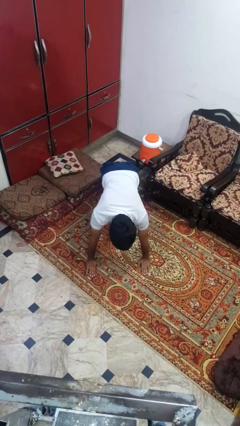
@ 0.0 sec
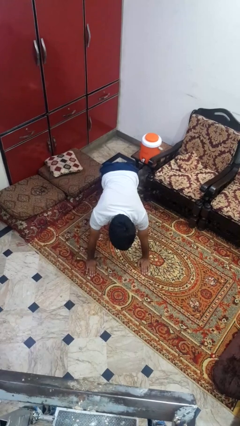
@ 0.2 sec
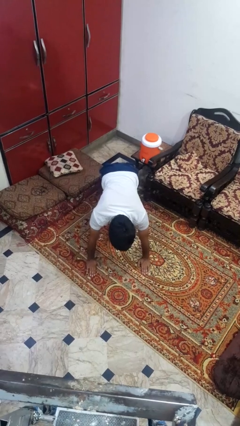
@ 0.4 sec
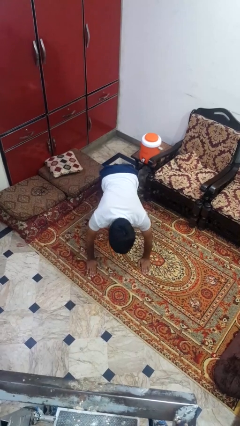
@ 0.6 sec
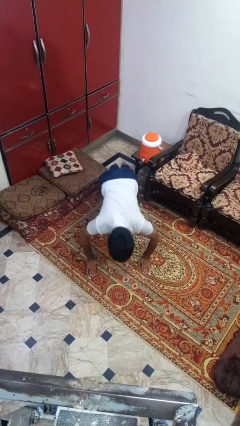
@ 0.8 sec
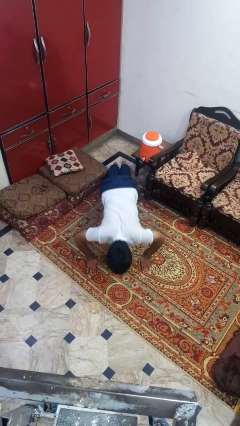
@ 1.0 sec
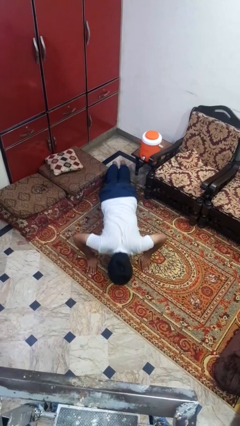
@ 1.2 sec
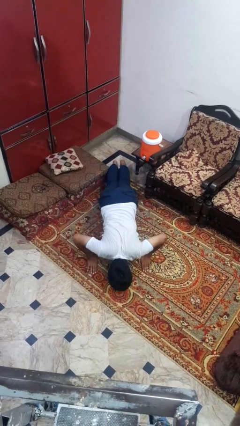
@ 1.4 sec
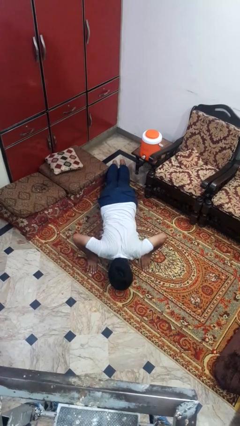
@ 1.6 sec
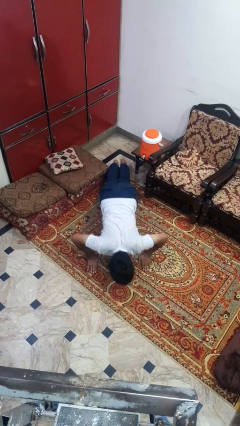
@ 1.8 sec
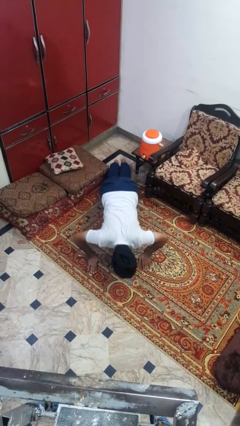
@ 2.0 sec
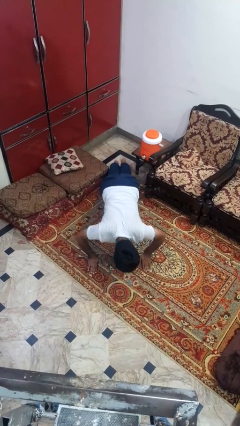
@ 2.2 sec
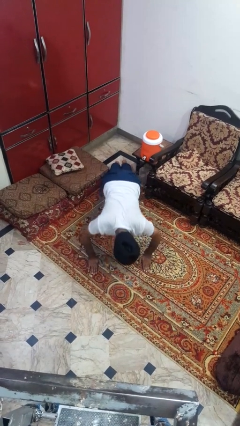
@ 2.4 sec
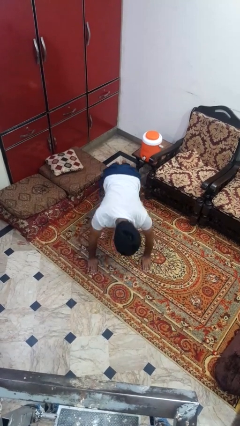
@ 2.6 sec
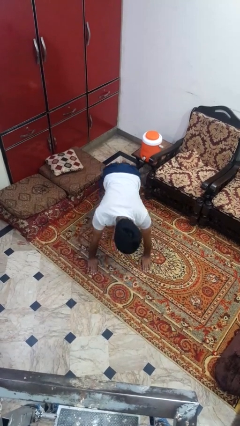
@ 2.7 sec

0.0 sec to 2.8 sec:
person exercises with pushup

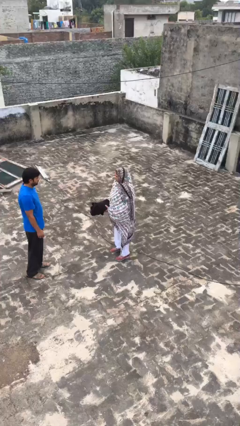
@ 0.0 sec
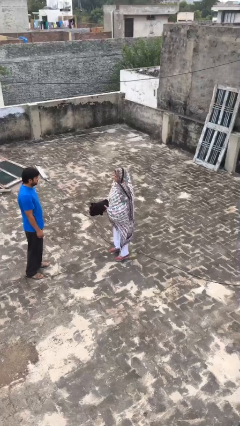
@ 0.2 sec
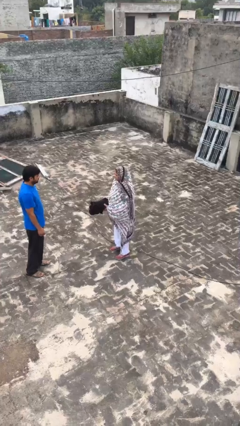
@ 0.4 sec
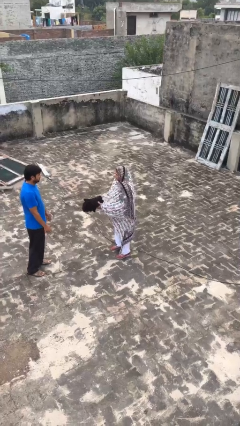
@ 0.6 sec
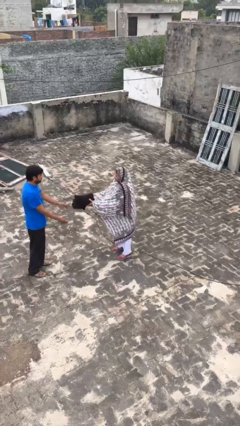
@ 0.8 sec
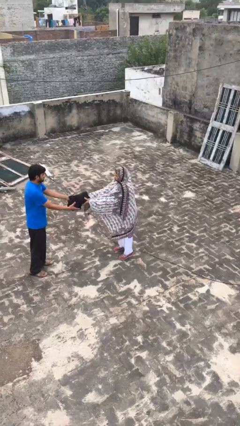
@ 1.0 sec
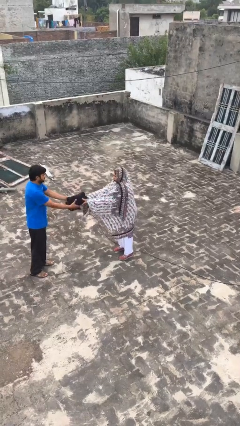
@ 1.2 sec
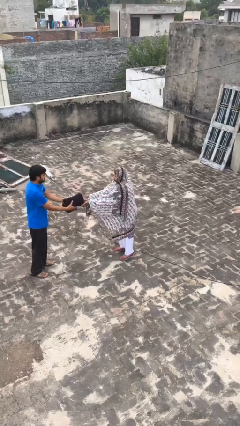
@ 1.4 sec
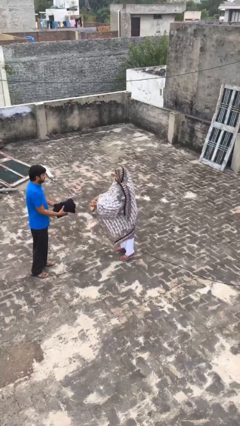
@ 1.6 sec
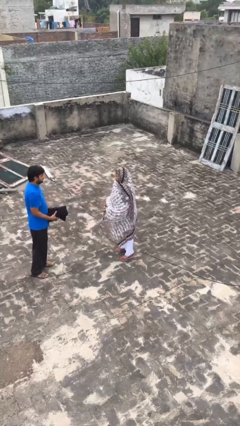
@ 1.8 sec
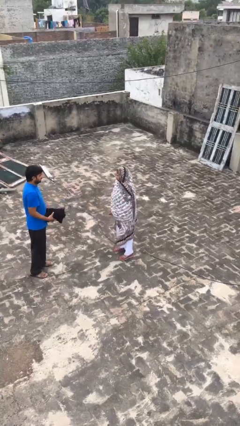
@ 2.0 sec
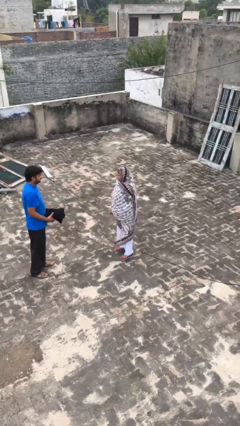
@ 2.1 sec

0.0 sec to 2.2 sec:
person transfers object to person

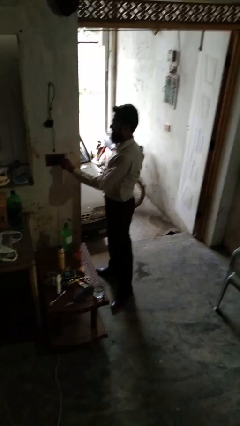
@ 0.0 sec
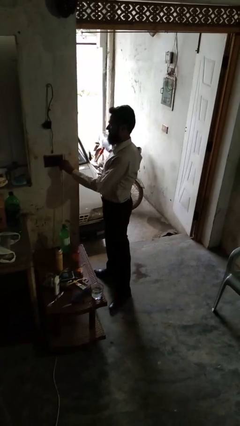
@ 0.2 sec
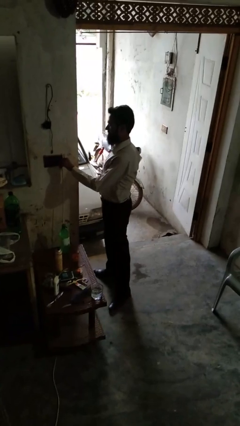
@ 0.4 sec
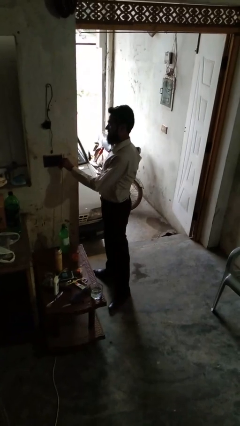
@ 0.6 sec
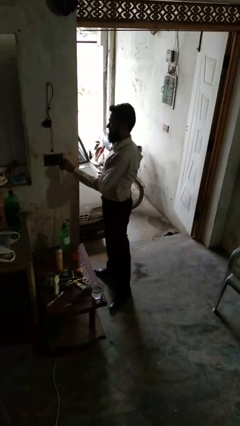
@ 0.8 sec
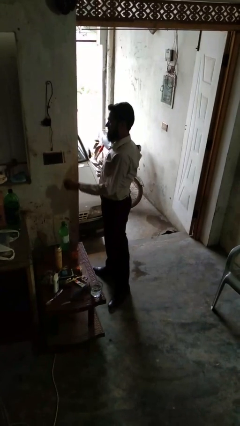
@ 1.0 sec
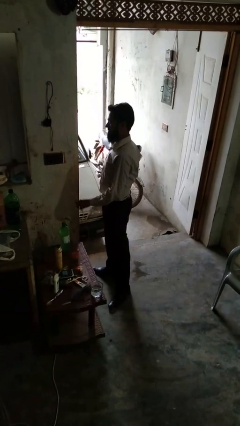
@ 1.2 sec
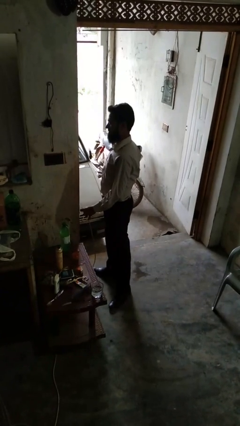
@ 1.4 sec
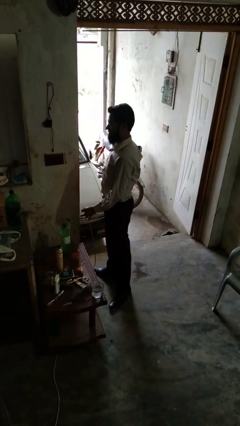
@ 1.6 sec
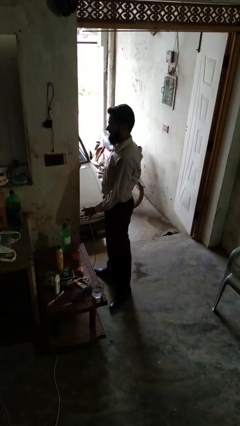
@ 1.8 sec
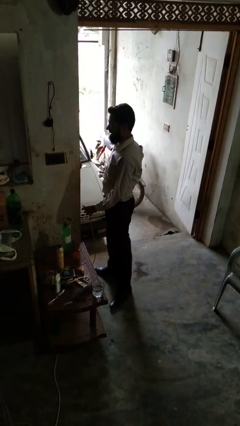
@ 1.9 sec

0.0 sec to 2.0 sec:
person unplugs from electrical socket

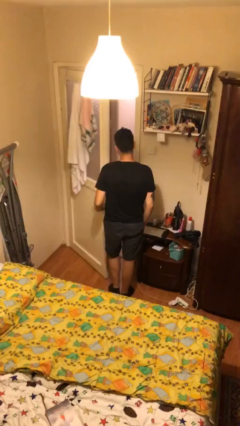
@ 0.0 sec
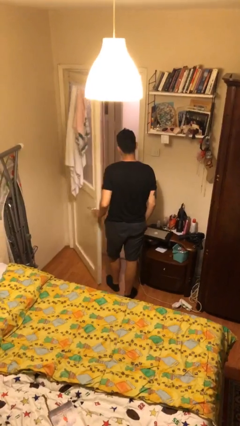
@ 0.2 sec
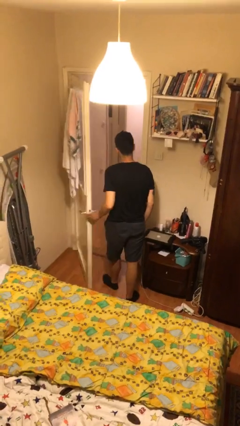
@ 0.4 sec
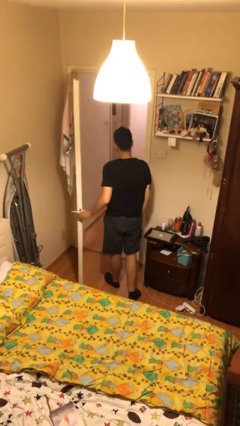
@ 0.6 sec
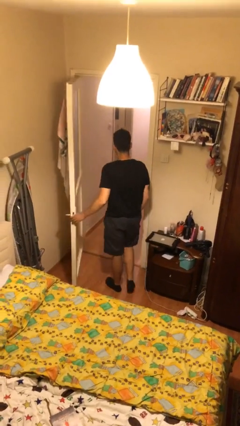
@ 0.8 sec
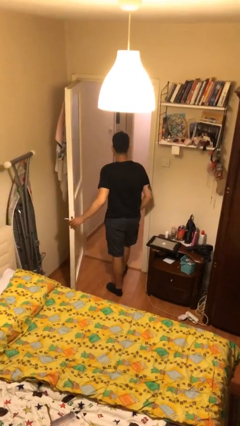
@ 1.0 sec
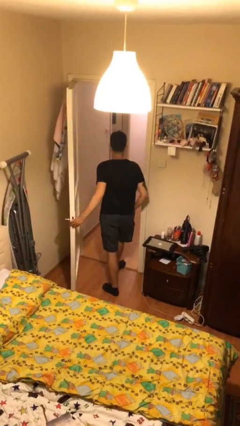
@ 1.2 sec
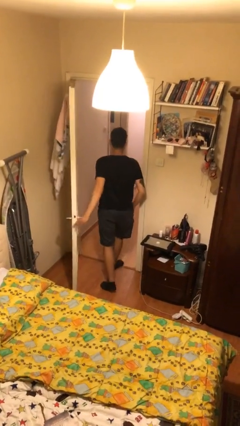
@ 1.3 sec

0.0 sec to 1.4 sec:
person exits scene through structure

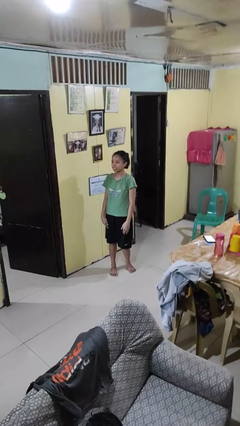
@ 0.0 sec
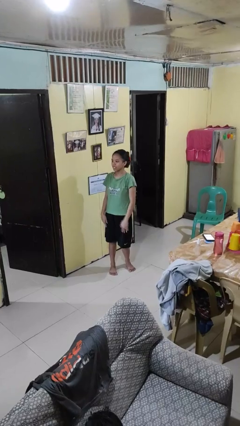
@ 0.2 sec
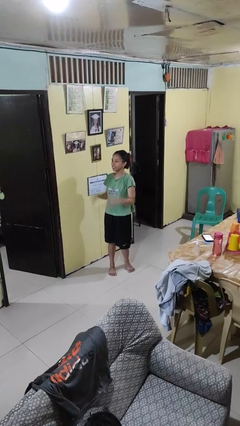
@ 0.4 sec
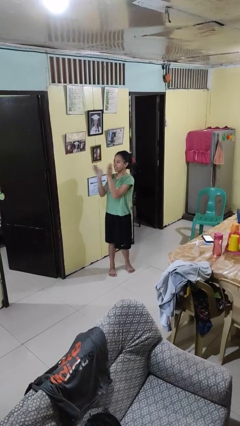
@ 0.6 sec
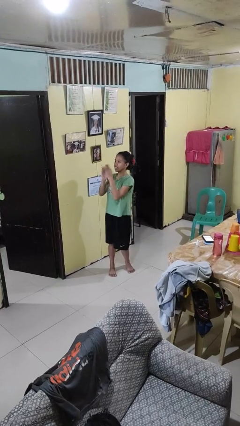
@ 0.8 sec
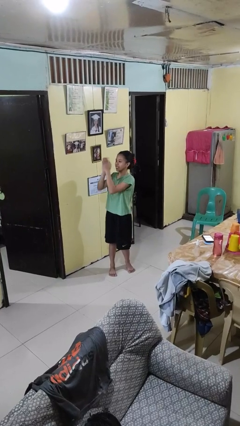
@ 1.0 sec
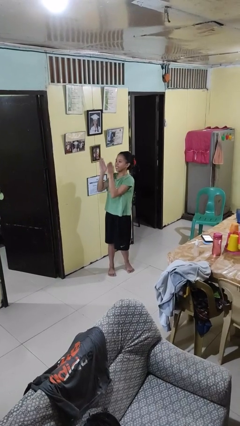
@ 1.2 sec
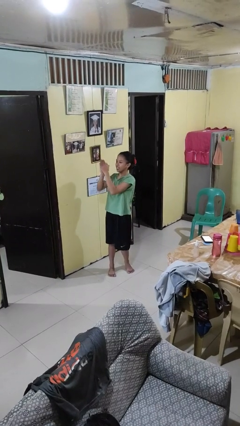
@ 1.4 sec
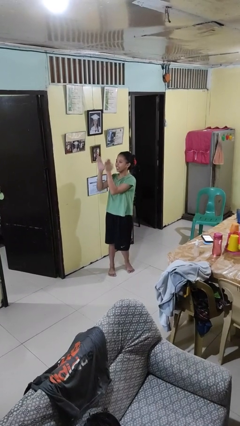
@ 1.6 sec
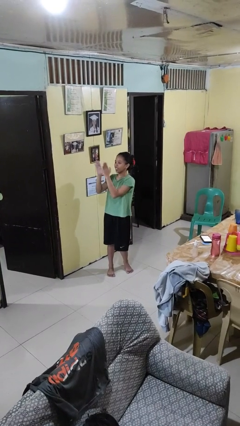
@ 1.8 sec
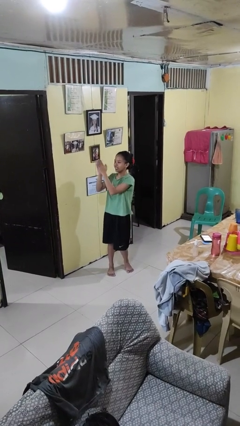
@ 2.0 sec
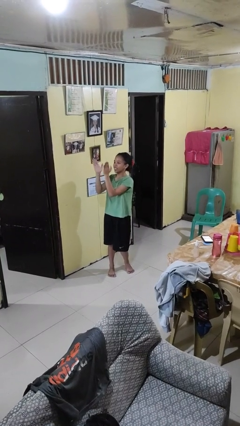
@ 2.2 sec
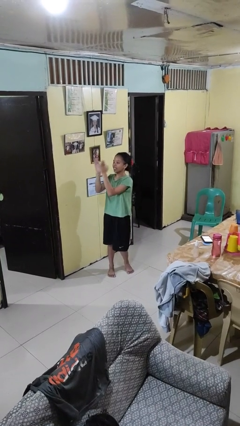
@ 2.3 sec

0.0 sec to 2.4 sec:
person claps hands

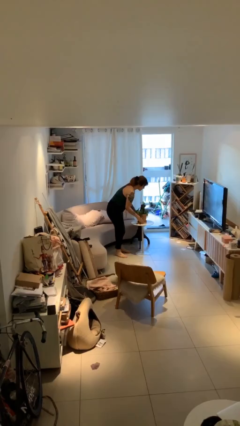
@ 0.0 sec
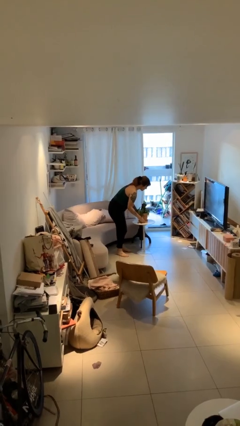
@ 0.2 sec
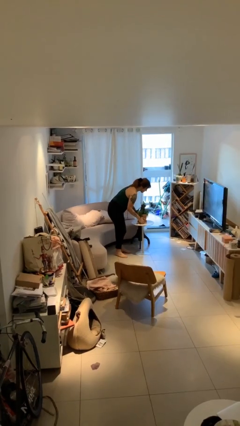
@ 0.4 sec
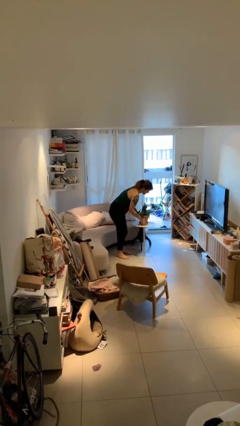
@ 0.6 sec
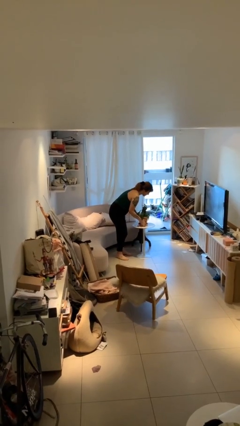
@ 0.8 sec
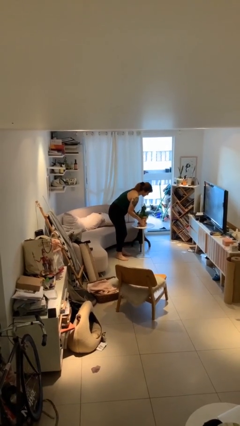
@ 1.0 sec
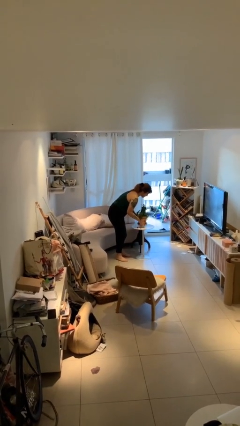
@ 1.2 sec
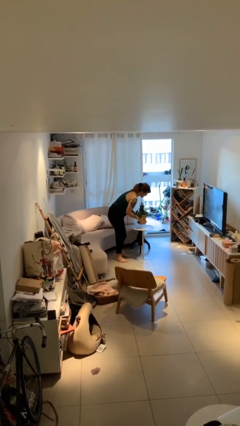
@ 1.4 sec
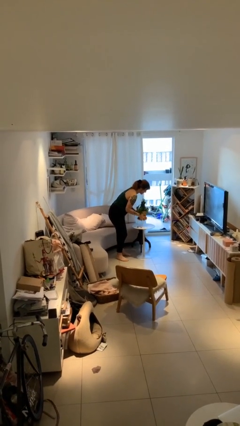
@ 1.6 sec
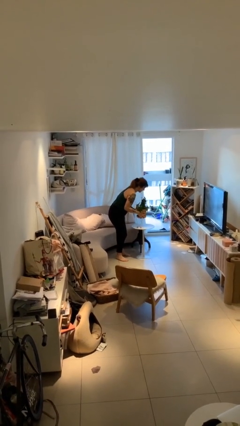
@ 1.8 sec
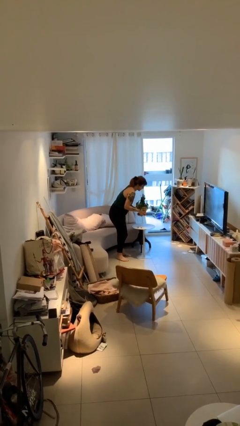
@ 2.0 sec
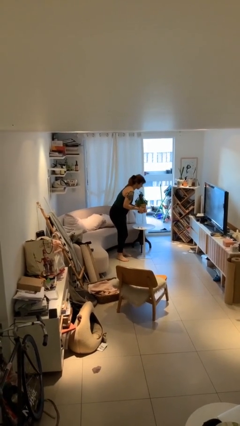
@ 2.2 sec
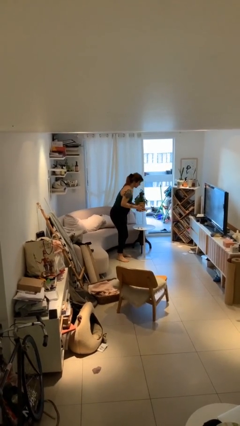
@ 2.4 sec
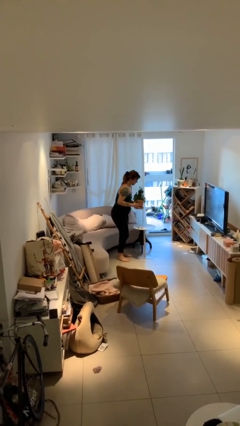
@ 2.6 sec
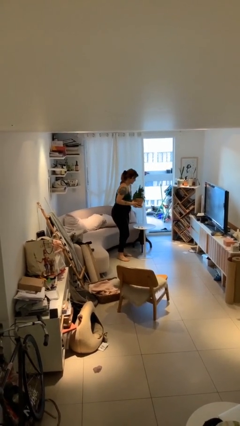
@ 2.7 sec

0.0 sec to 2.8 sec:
person picks up object from table

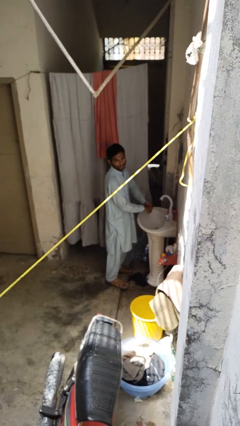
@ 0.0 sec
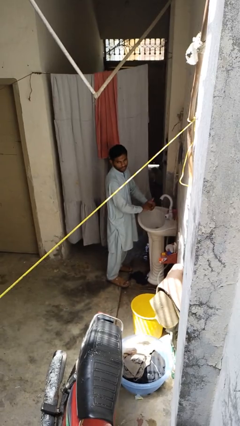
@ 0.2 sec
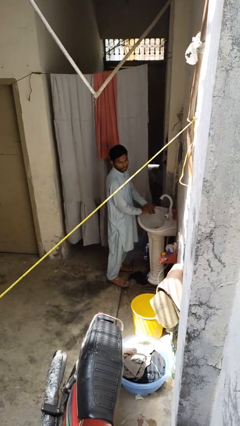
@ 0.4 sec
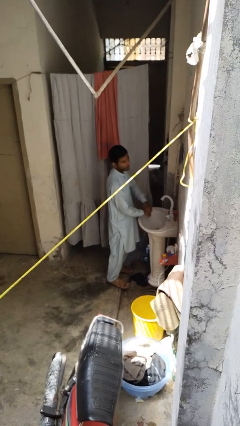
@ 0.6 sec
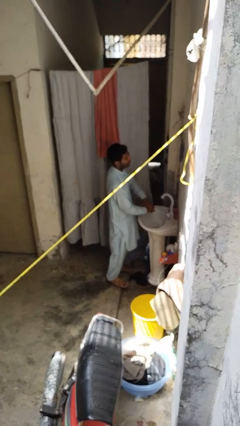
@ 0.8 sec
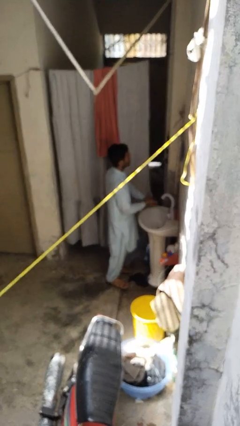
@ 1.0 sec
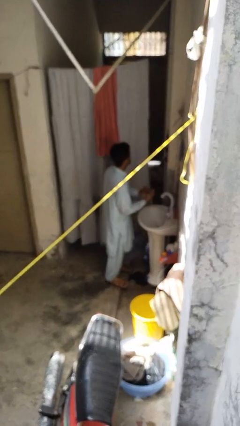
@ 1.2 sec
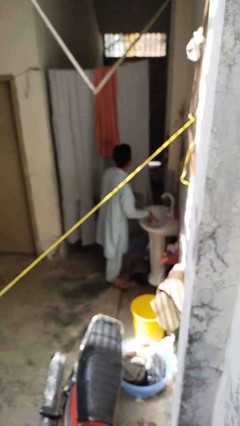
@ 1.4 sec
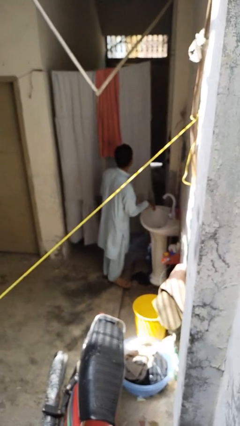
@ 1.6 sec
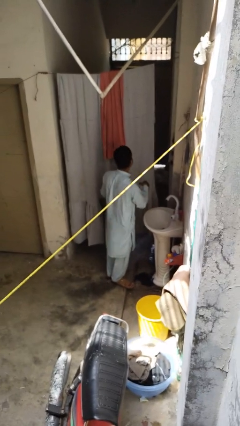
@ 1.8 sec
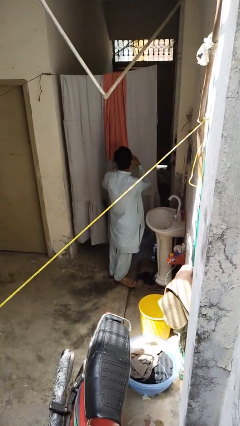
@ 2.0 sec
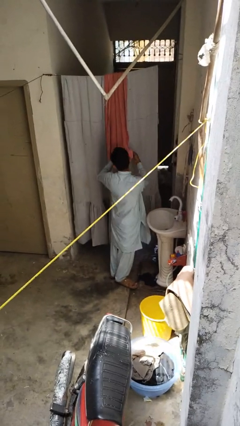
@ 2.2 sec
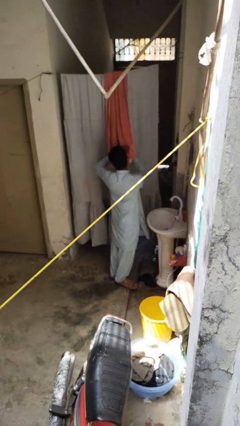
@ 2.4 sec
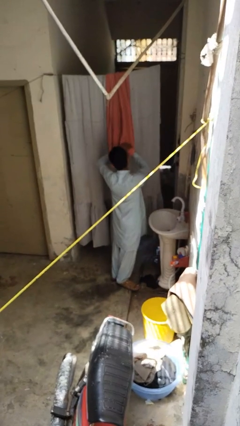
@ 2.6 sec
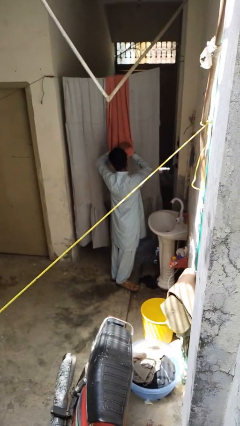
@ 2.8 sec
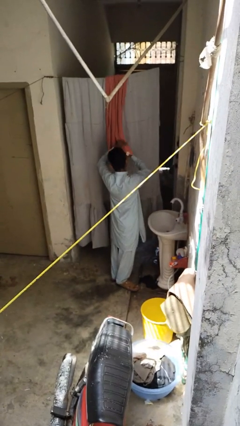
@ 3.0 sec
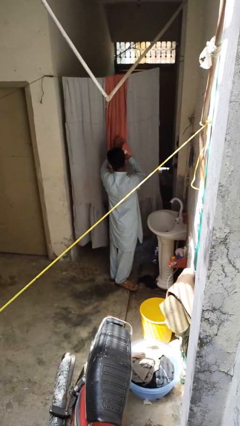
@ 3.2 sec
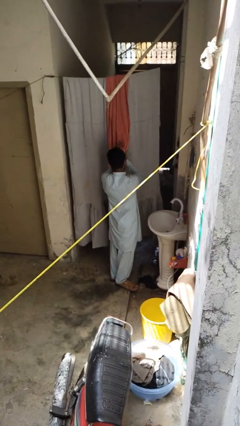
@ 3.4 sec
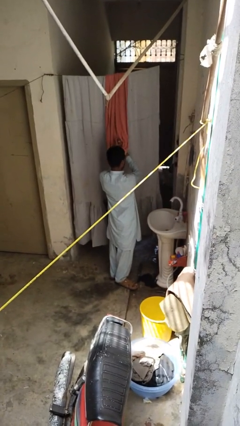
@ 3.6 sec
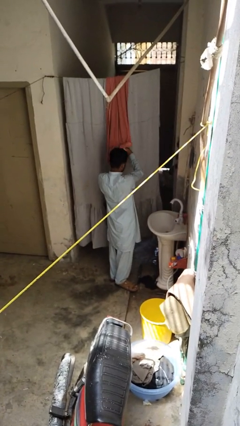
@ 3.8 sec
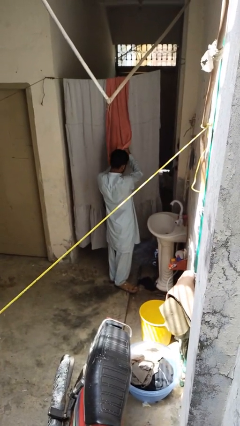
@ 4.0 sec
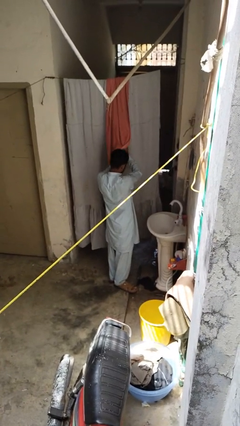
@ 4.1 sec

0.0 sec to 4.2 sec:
person dries hands with towel
